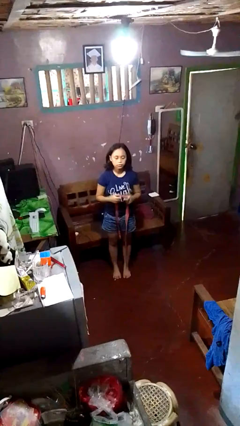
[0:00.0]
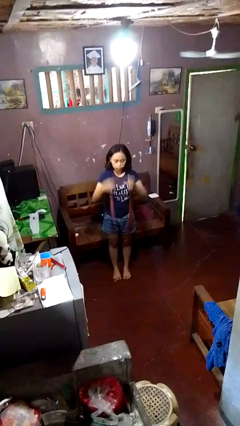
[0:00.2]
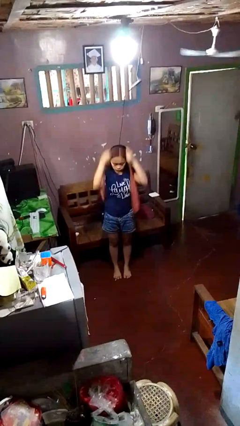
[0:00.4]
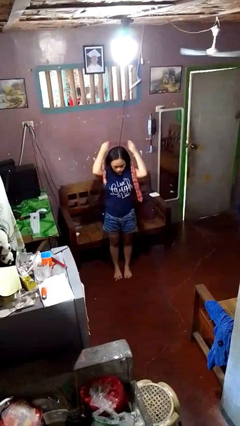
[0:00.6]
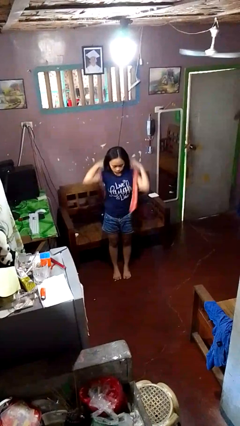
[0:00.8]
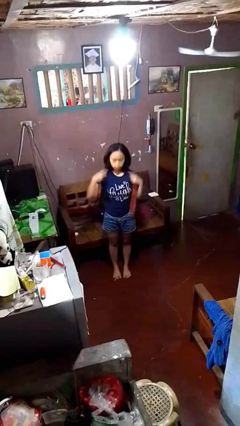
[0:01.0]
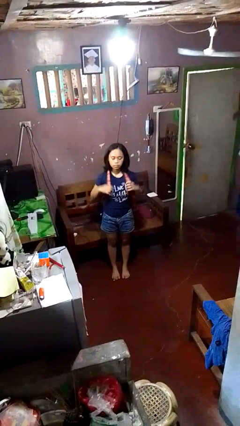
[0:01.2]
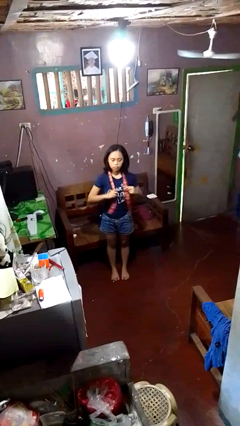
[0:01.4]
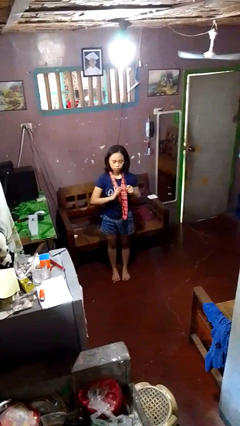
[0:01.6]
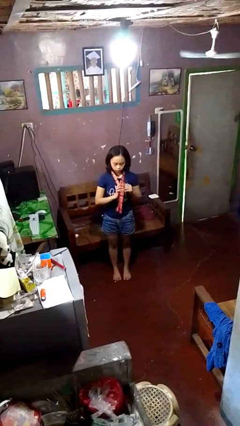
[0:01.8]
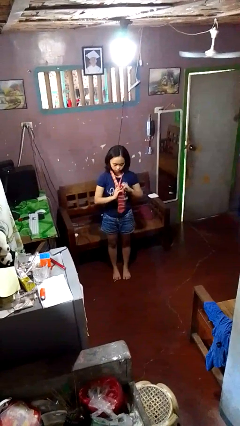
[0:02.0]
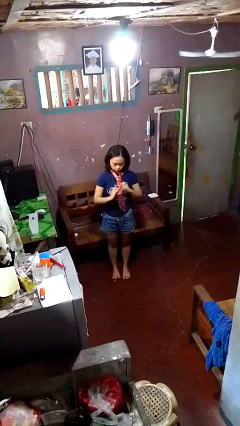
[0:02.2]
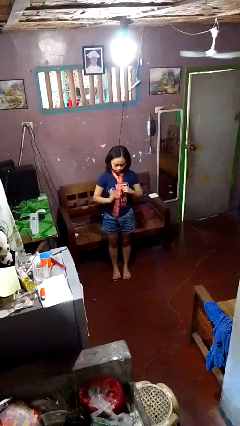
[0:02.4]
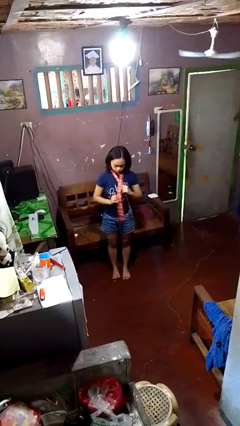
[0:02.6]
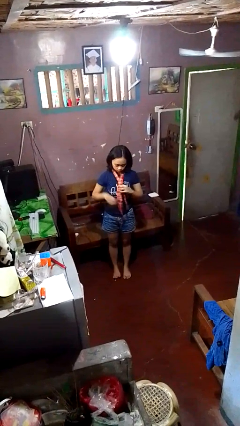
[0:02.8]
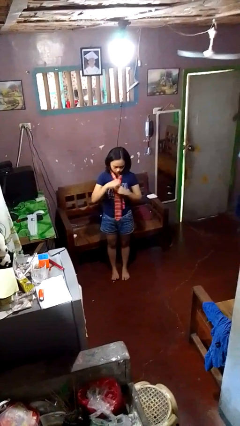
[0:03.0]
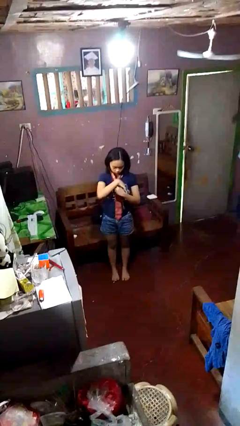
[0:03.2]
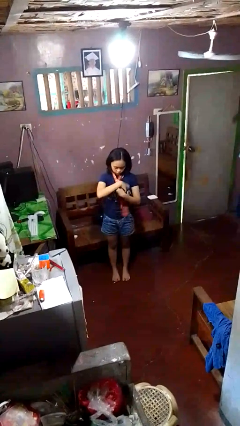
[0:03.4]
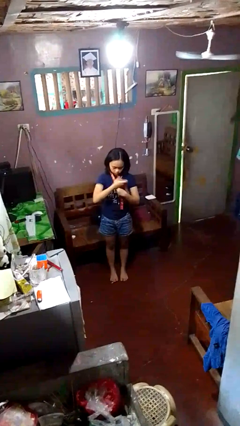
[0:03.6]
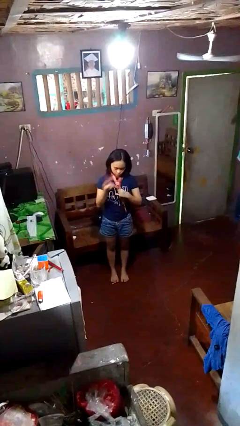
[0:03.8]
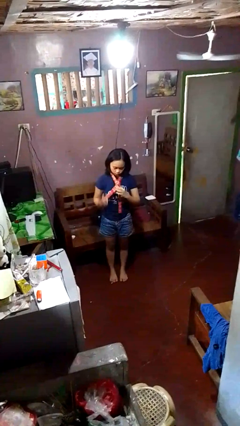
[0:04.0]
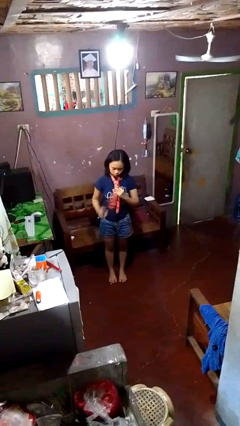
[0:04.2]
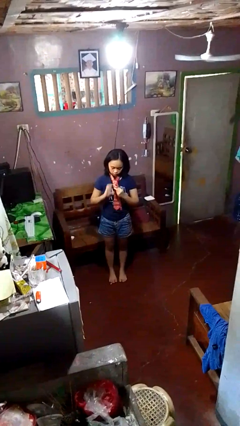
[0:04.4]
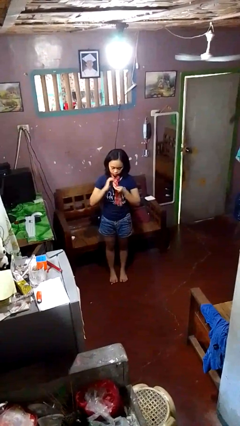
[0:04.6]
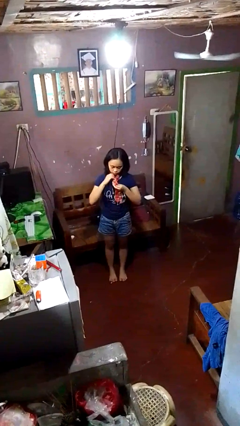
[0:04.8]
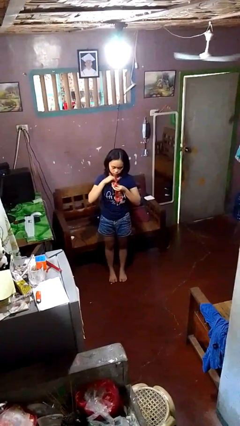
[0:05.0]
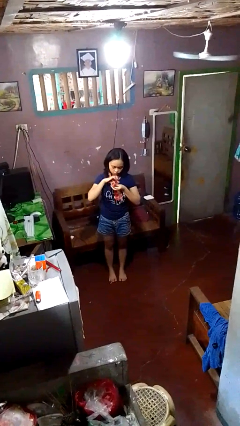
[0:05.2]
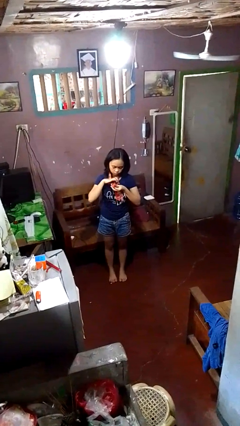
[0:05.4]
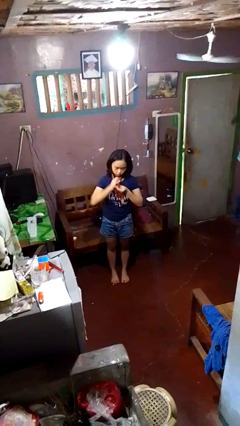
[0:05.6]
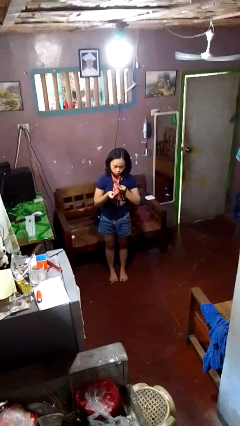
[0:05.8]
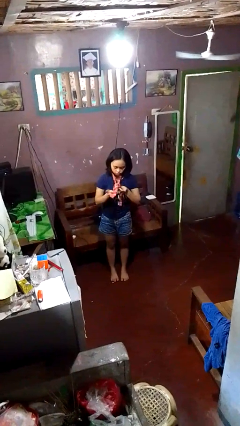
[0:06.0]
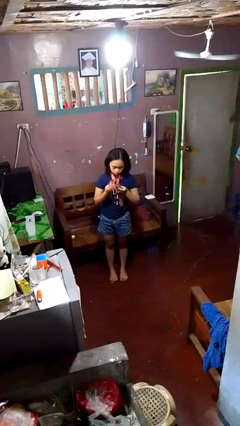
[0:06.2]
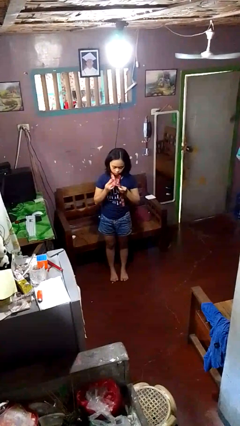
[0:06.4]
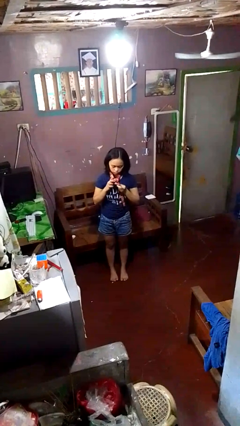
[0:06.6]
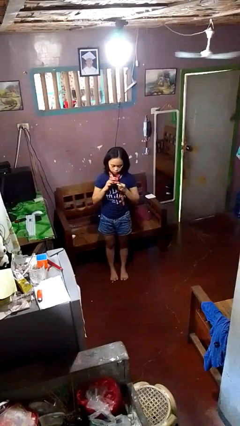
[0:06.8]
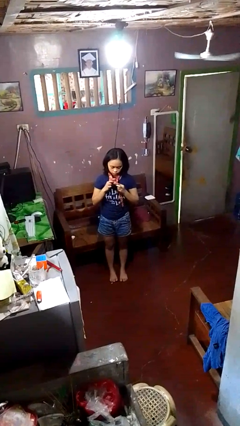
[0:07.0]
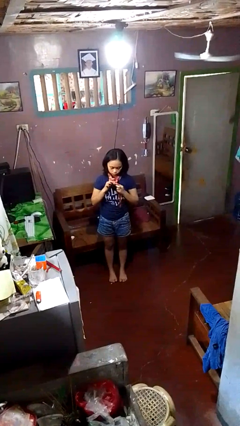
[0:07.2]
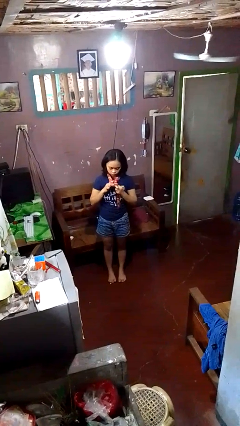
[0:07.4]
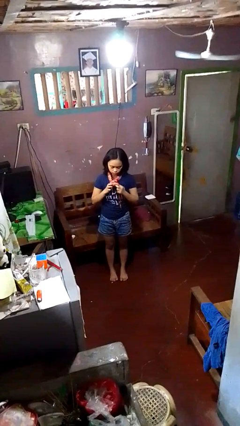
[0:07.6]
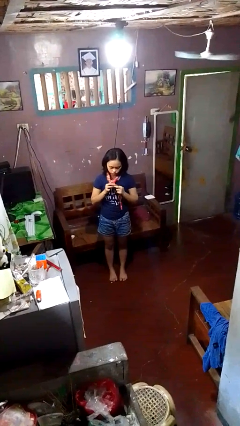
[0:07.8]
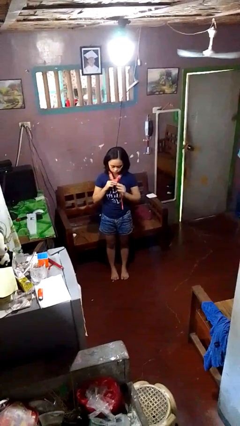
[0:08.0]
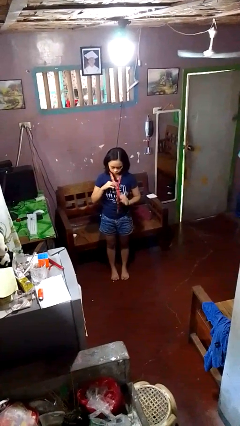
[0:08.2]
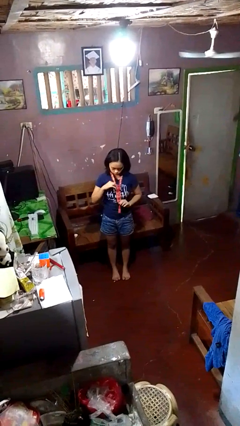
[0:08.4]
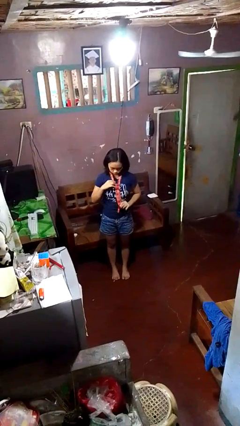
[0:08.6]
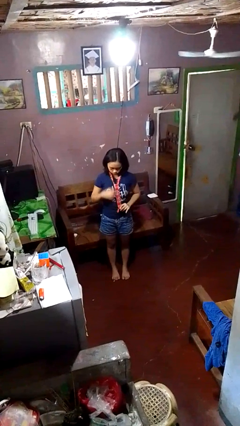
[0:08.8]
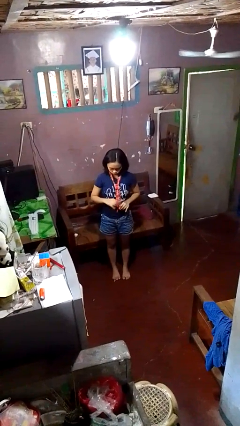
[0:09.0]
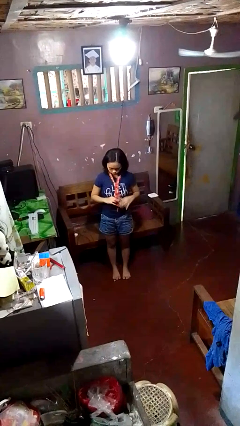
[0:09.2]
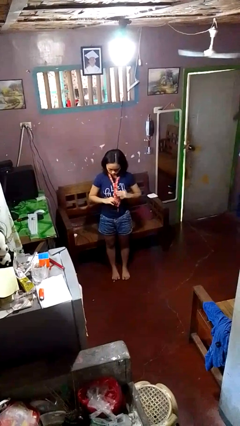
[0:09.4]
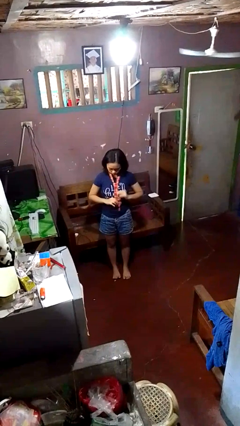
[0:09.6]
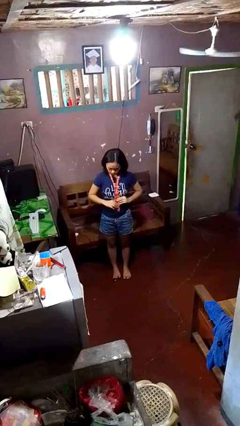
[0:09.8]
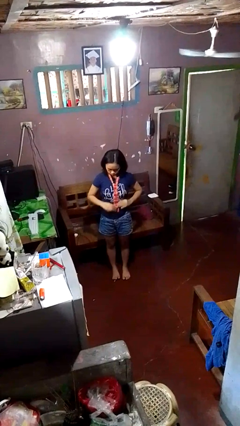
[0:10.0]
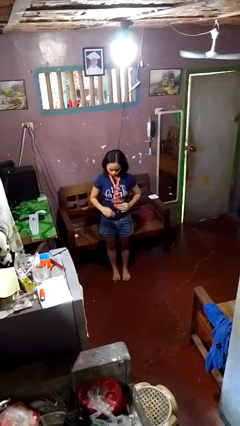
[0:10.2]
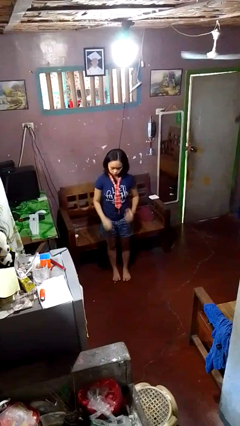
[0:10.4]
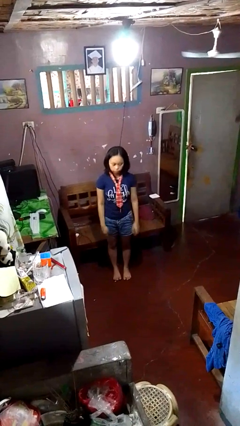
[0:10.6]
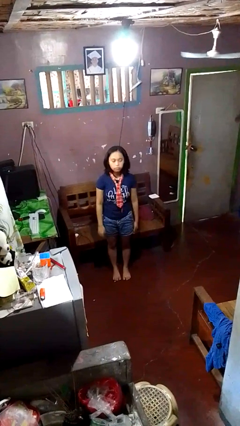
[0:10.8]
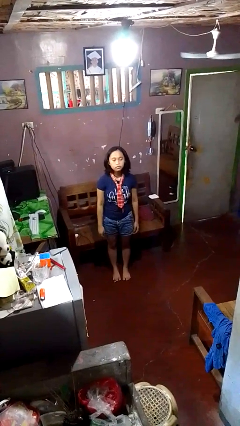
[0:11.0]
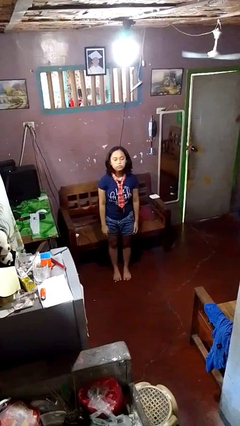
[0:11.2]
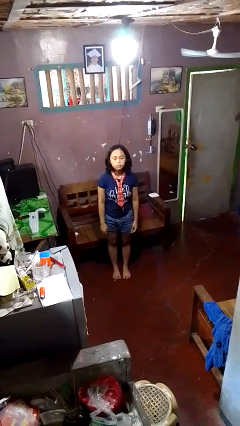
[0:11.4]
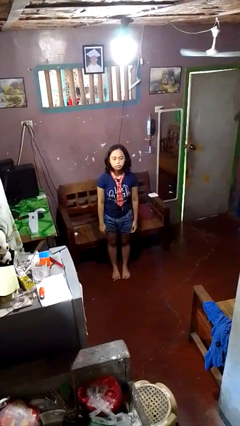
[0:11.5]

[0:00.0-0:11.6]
person puts on necktie

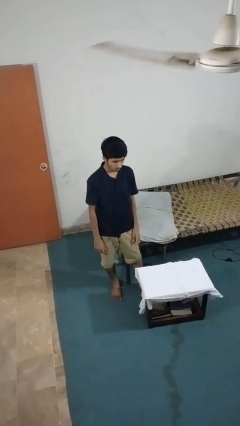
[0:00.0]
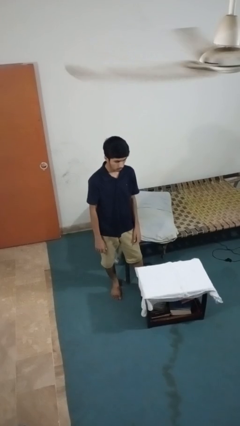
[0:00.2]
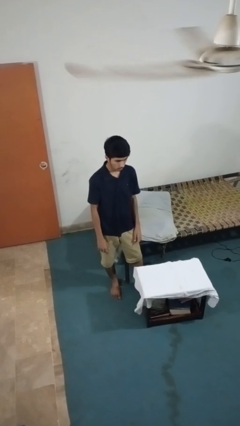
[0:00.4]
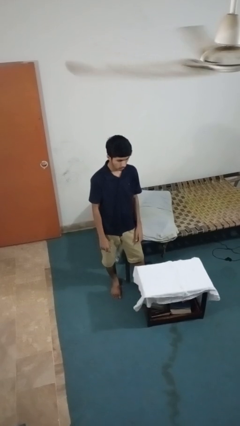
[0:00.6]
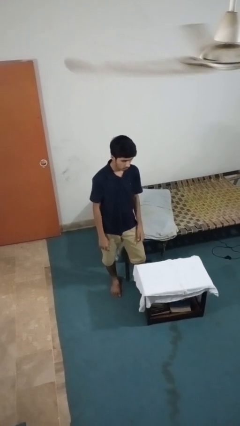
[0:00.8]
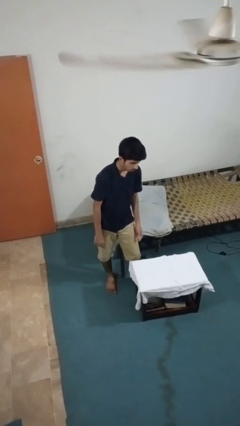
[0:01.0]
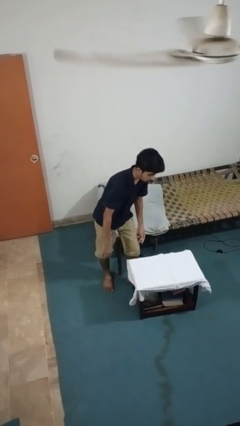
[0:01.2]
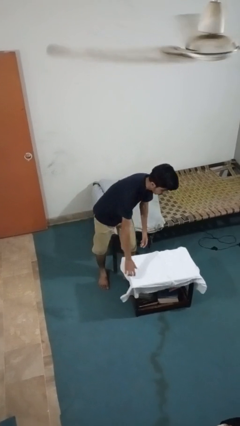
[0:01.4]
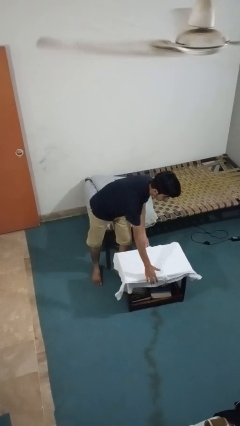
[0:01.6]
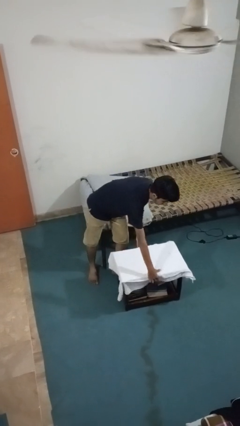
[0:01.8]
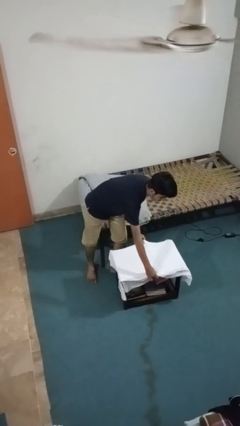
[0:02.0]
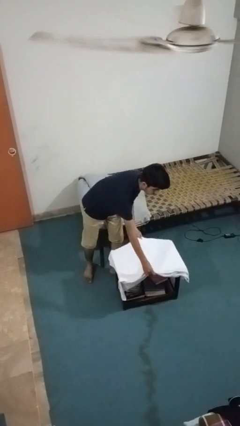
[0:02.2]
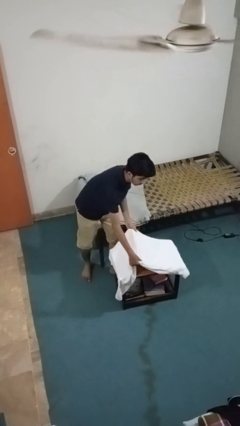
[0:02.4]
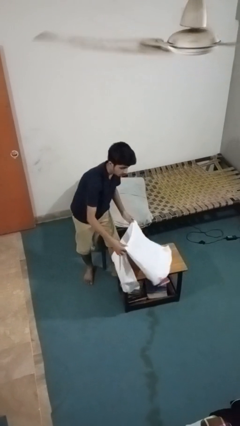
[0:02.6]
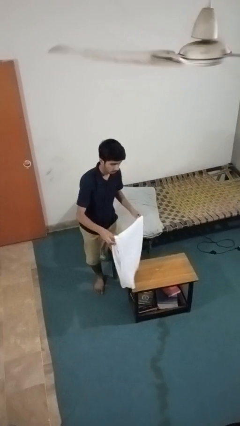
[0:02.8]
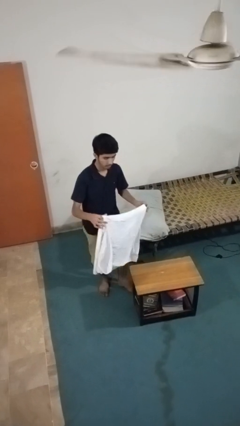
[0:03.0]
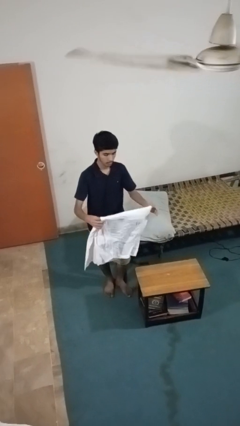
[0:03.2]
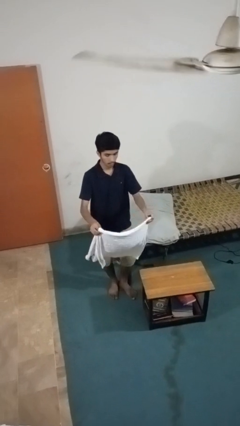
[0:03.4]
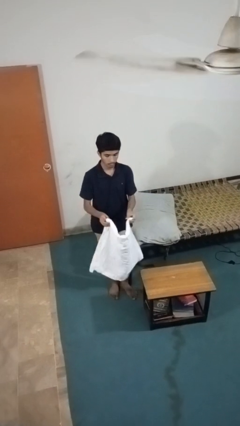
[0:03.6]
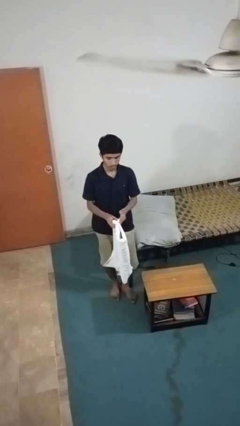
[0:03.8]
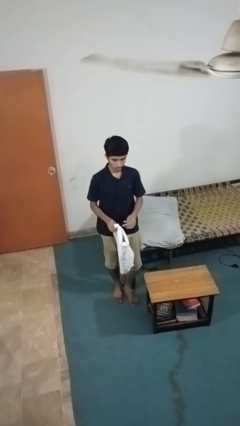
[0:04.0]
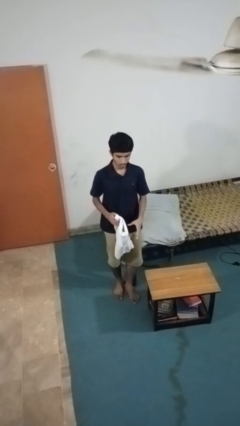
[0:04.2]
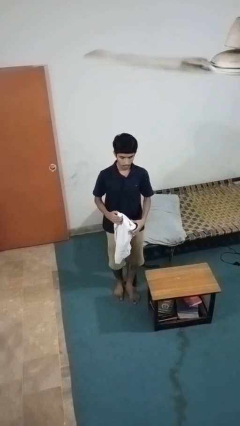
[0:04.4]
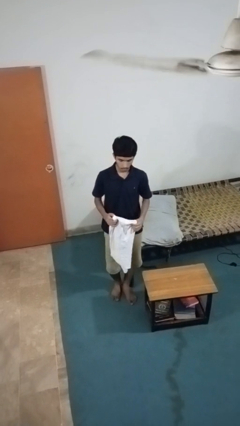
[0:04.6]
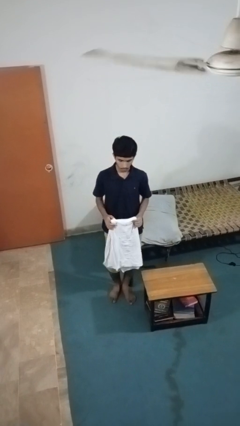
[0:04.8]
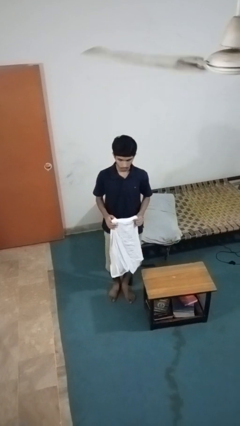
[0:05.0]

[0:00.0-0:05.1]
person folds tablecloth

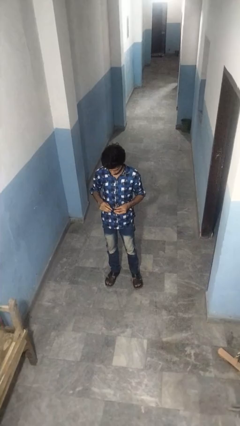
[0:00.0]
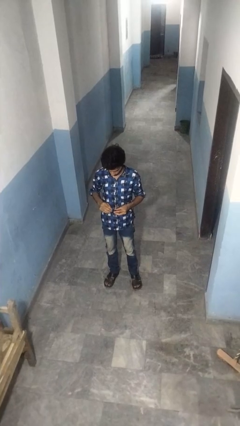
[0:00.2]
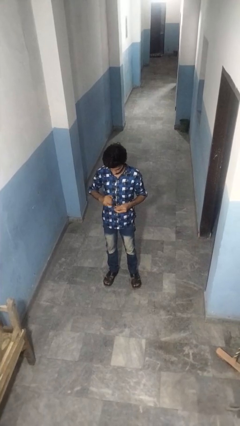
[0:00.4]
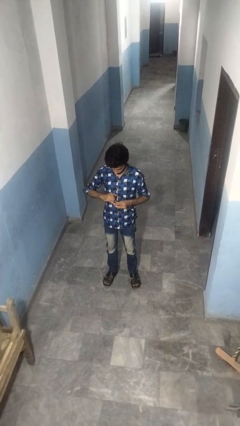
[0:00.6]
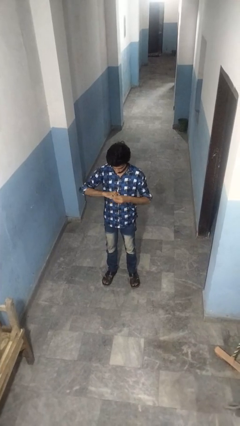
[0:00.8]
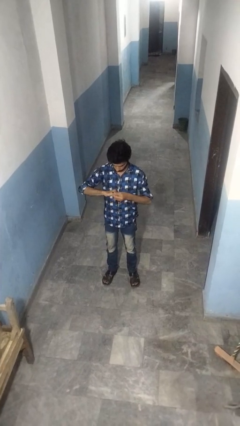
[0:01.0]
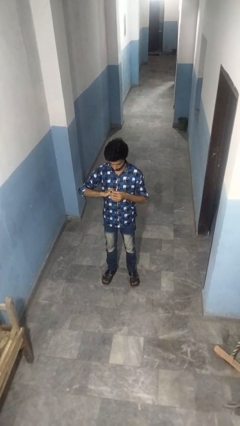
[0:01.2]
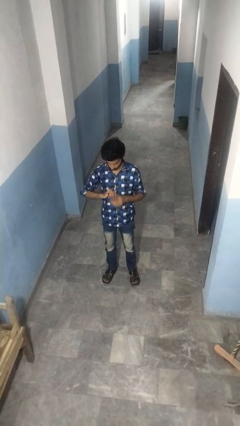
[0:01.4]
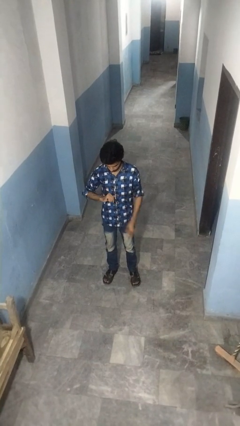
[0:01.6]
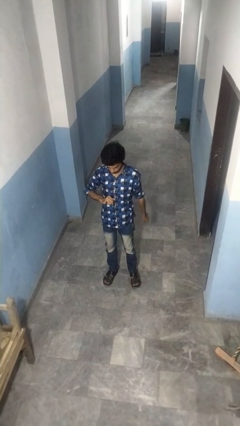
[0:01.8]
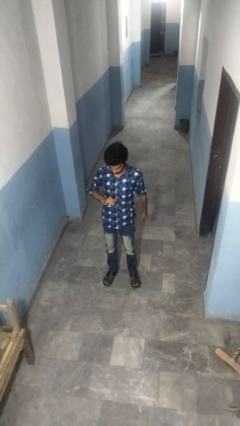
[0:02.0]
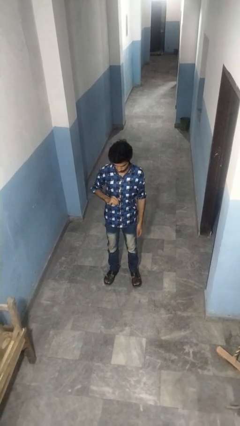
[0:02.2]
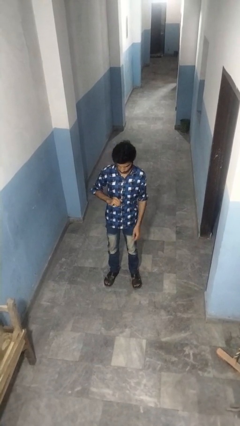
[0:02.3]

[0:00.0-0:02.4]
person puts on ring
